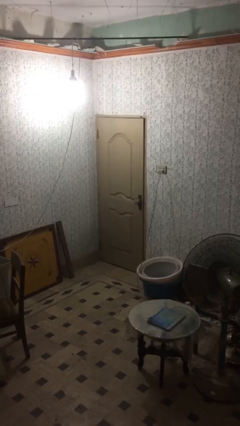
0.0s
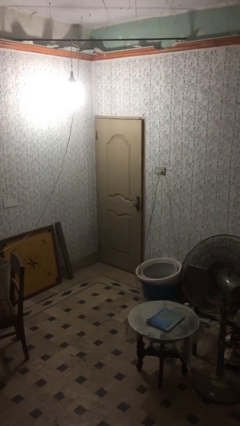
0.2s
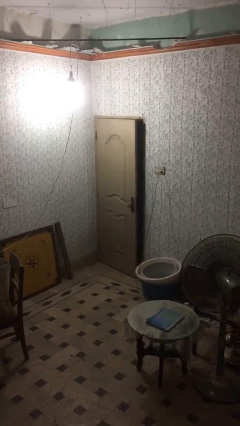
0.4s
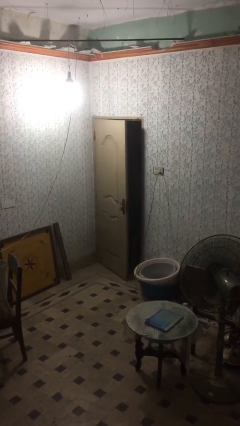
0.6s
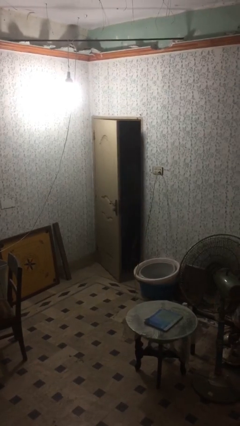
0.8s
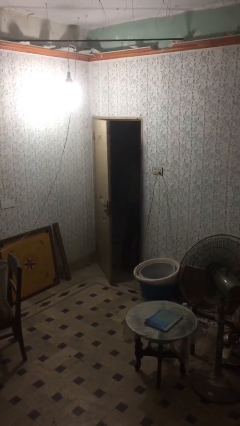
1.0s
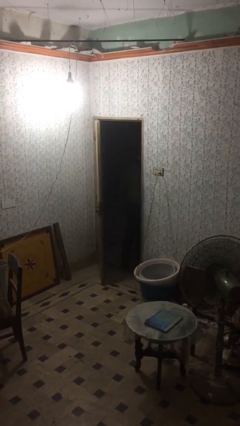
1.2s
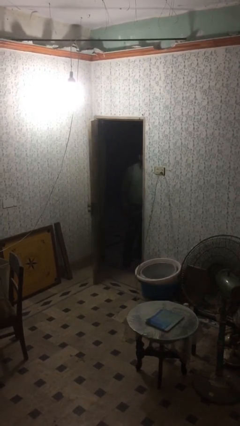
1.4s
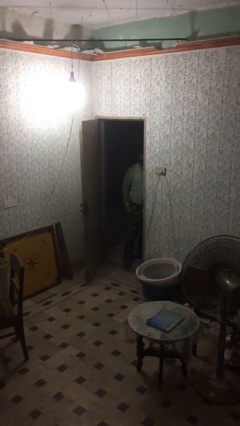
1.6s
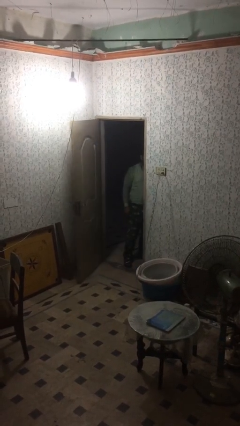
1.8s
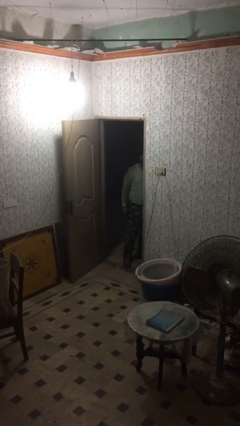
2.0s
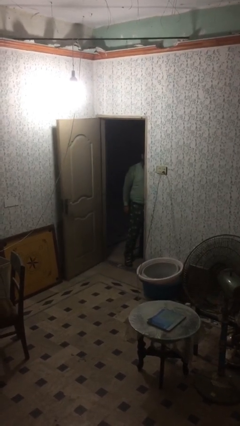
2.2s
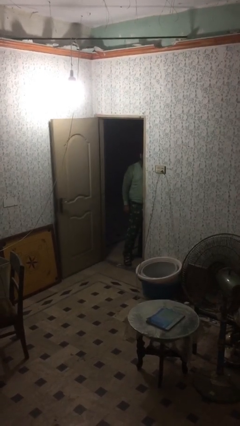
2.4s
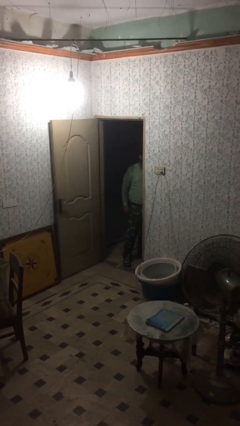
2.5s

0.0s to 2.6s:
person opens facility door

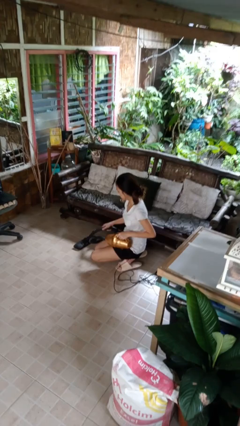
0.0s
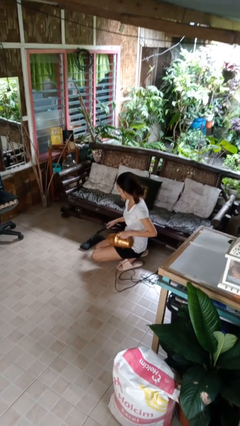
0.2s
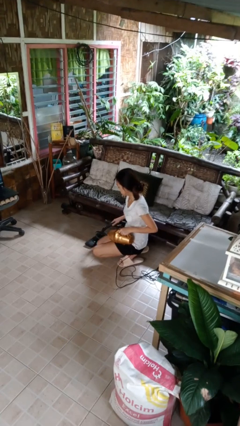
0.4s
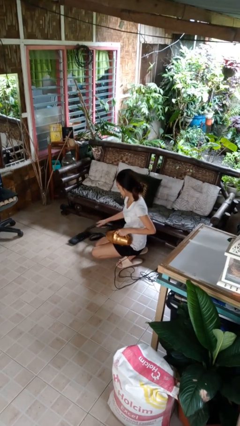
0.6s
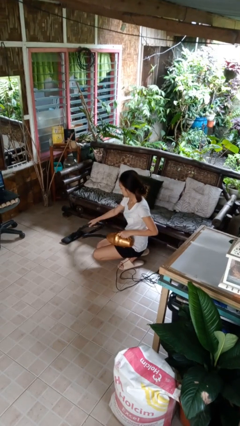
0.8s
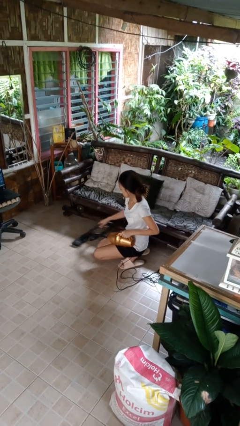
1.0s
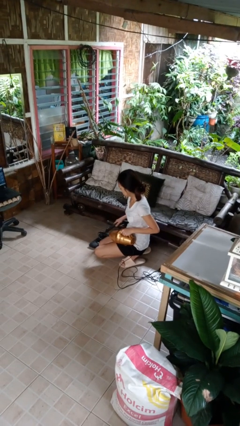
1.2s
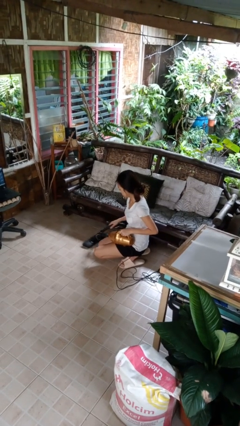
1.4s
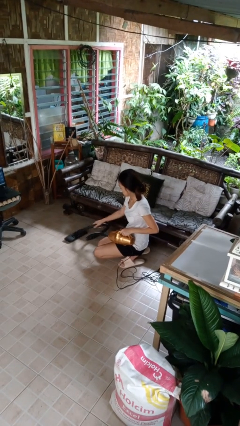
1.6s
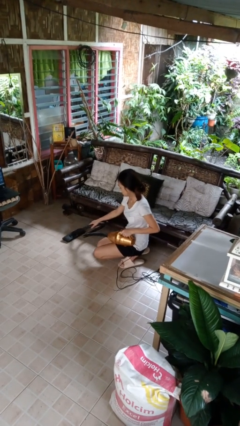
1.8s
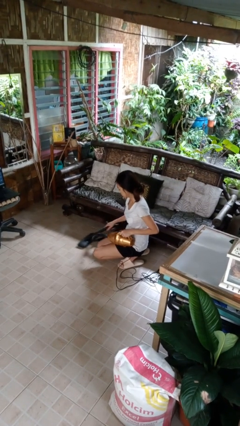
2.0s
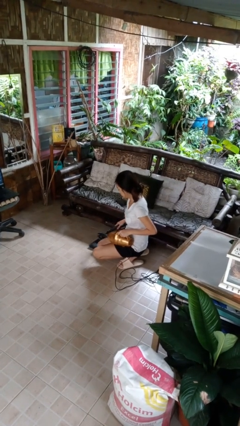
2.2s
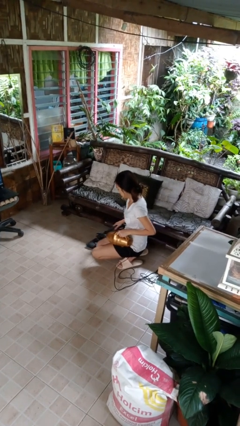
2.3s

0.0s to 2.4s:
person vacuums carpet

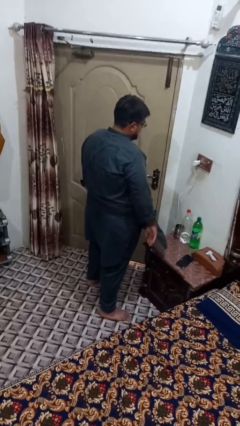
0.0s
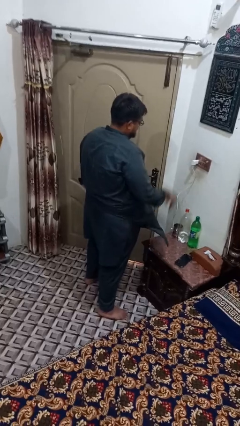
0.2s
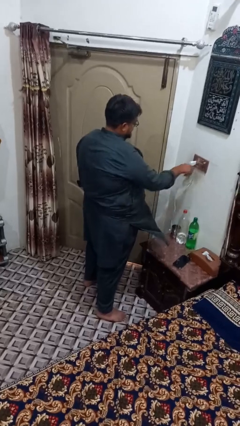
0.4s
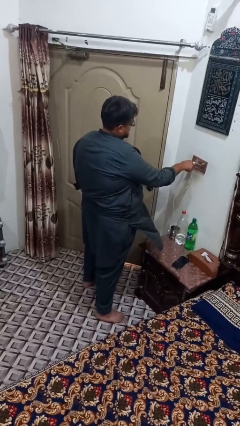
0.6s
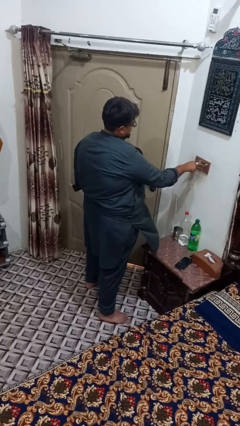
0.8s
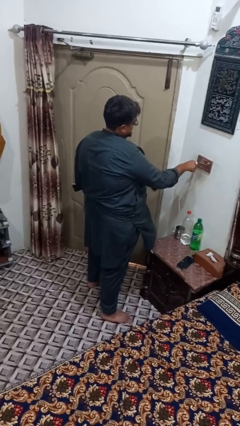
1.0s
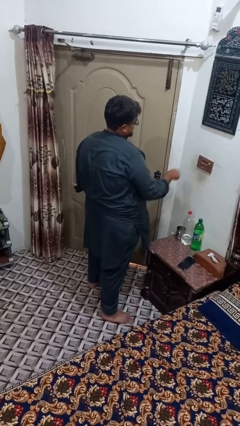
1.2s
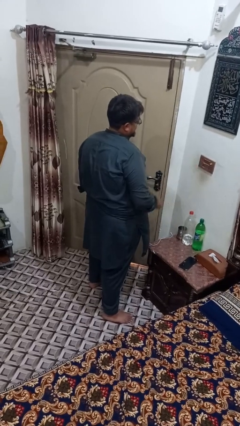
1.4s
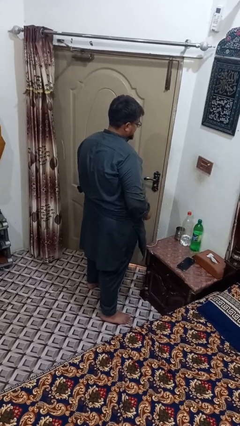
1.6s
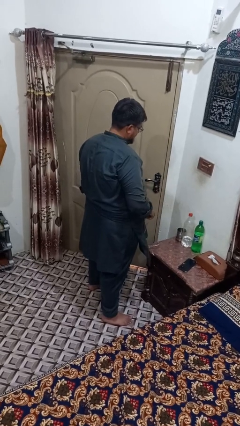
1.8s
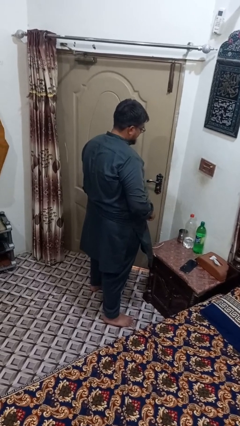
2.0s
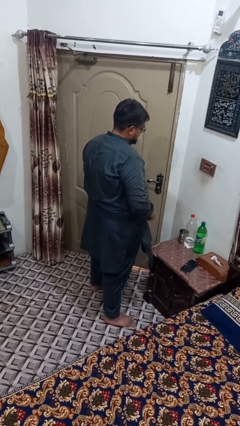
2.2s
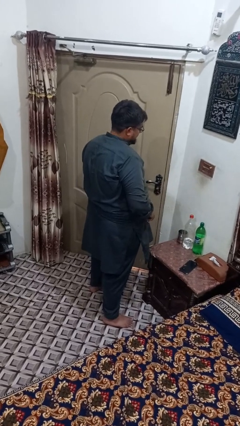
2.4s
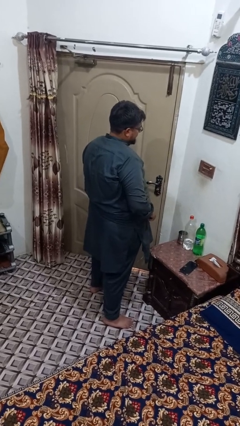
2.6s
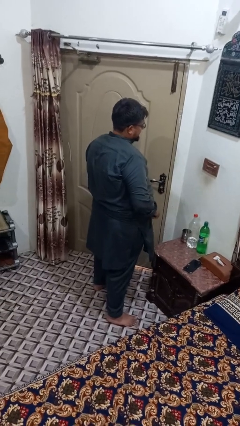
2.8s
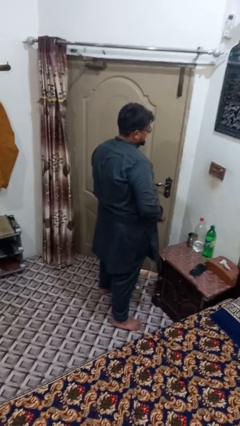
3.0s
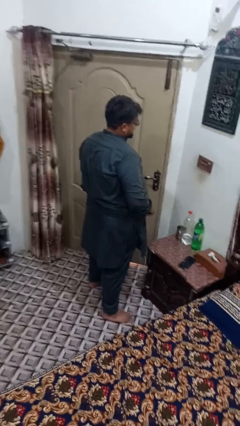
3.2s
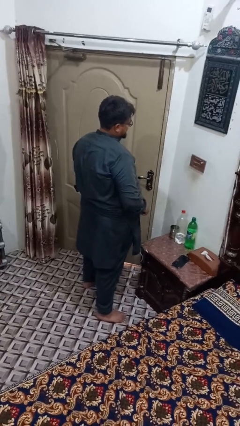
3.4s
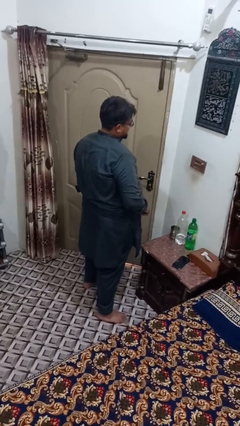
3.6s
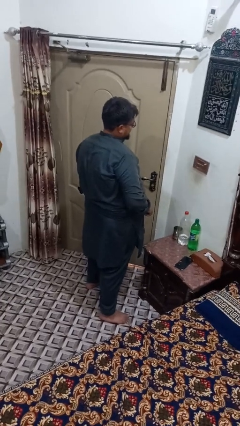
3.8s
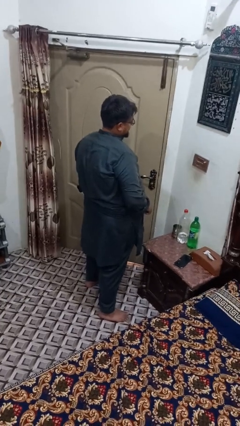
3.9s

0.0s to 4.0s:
person unplugs from electrical socket

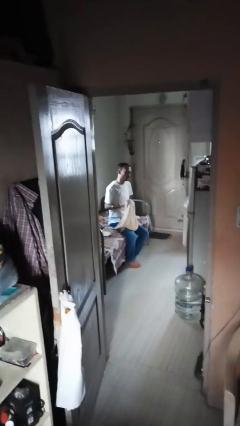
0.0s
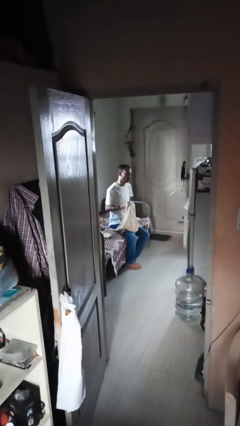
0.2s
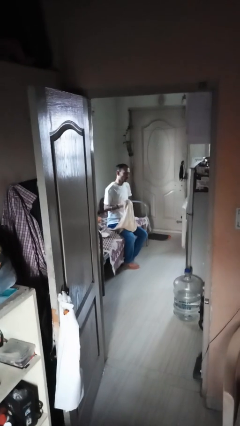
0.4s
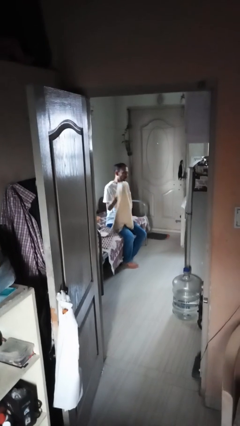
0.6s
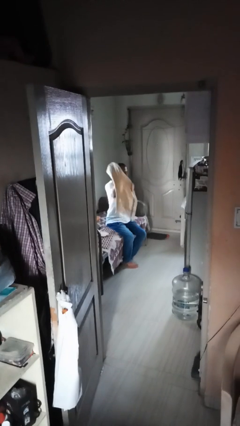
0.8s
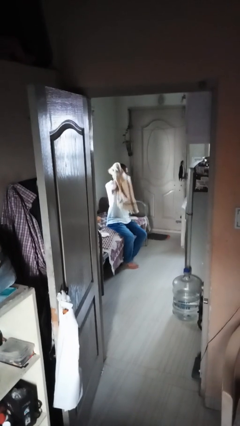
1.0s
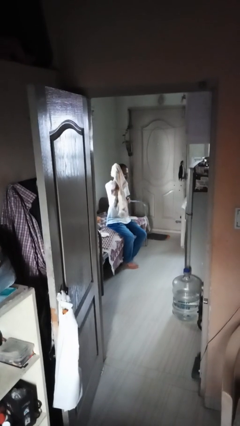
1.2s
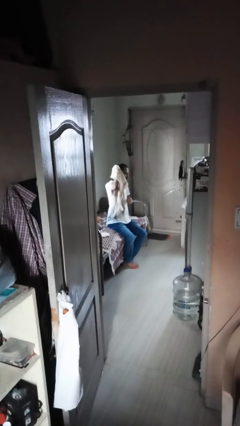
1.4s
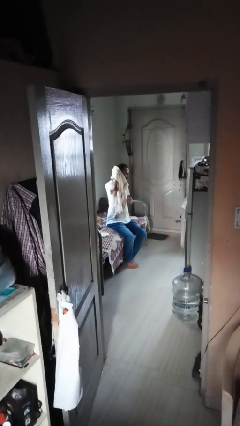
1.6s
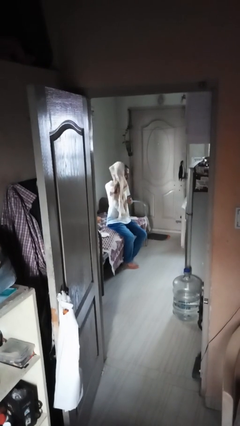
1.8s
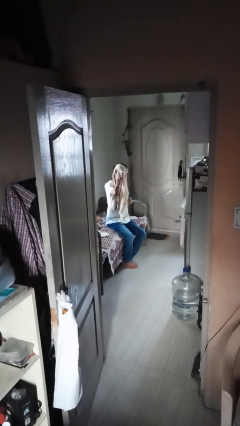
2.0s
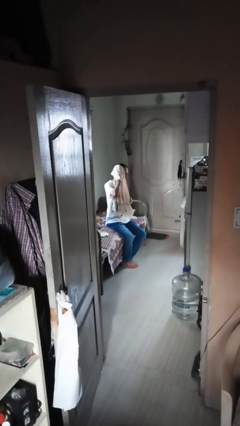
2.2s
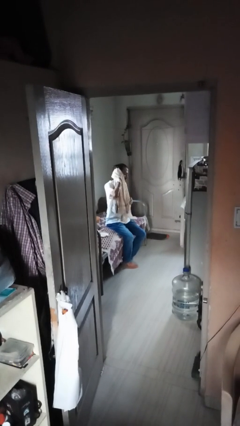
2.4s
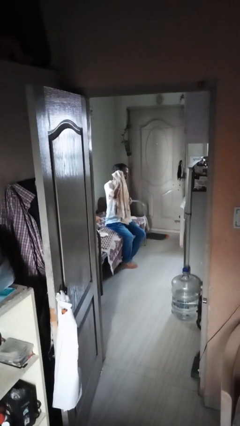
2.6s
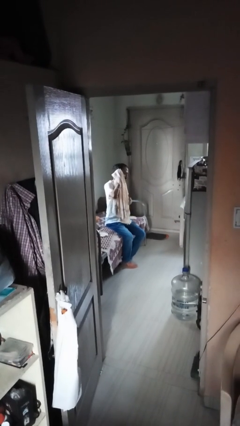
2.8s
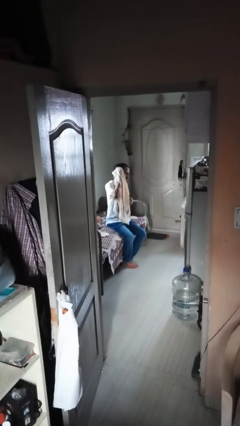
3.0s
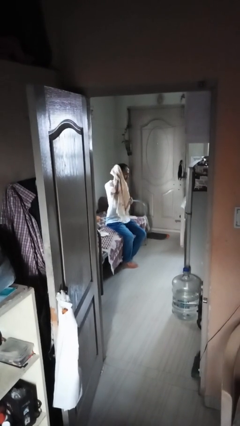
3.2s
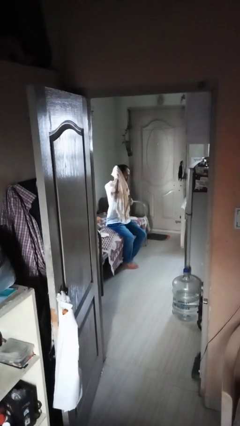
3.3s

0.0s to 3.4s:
person dries hair with towel

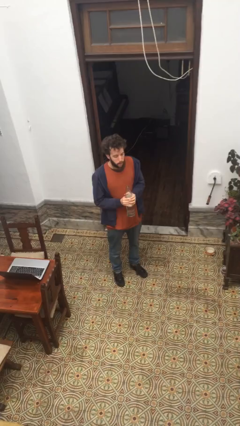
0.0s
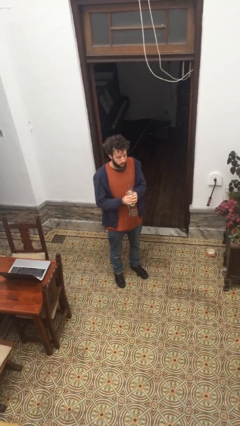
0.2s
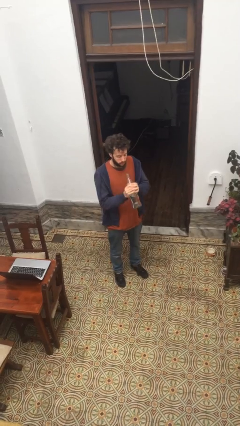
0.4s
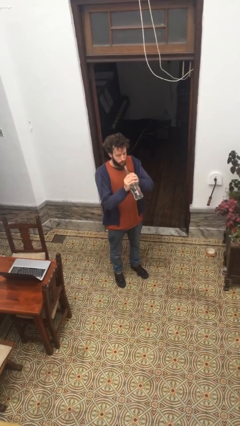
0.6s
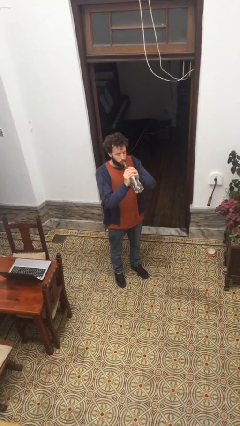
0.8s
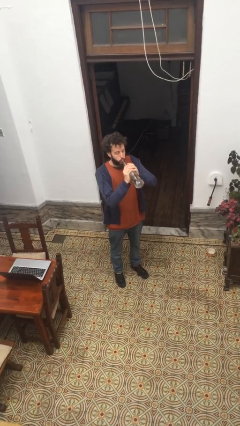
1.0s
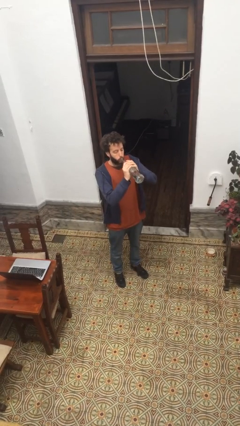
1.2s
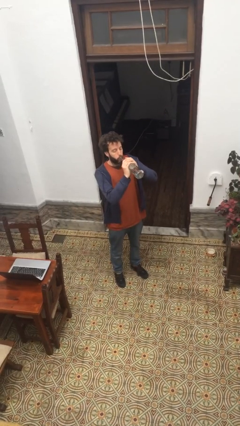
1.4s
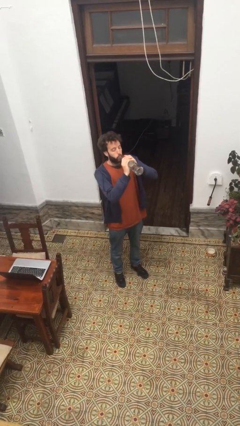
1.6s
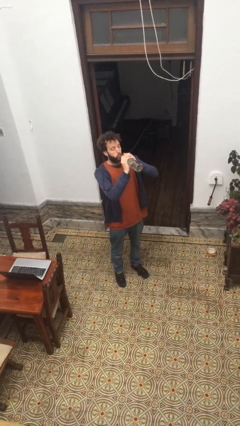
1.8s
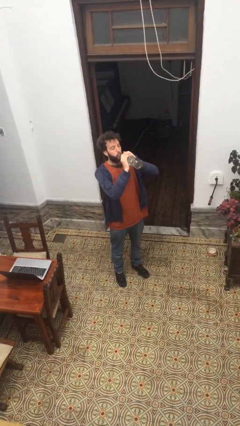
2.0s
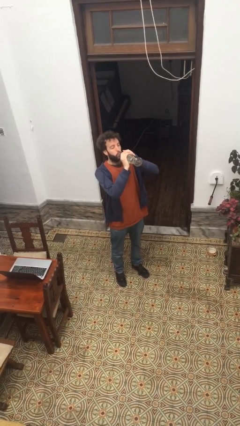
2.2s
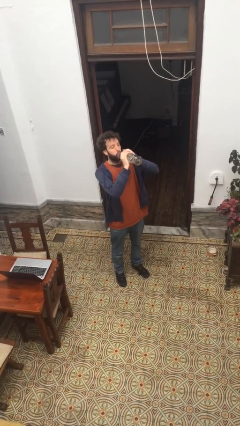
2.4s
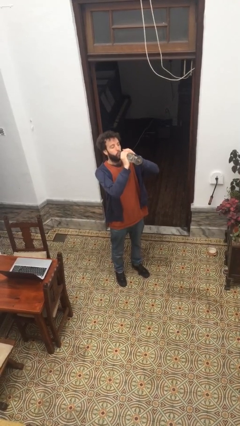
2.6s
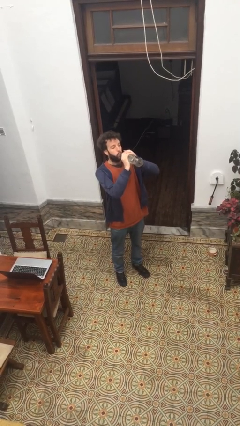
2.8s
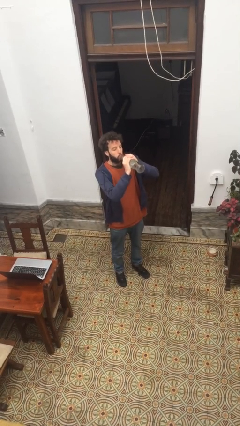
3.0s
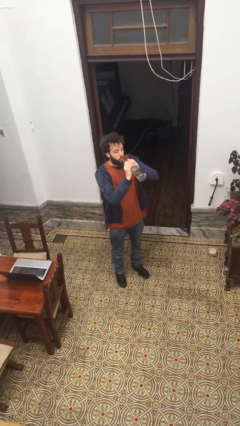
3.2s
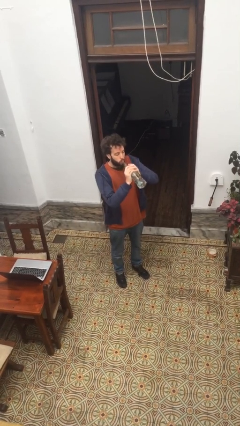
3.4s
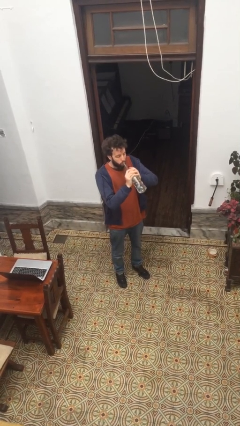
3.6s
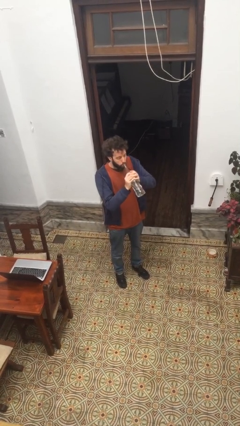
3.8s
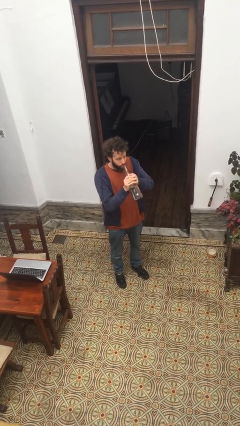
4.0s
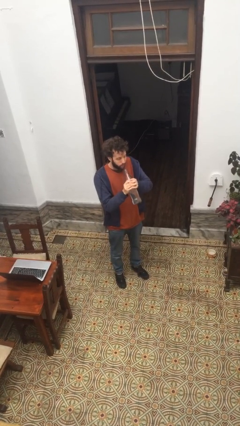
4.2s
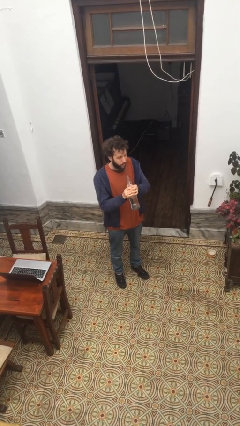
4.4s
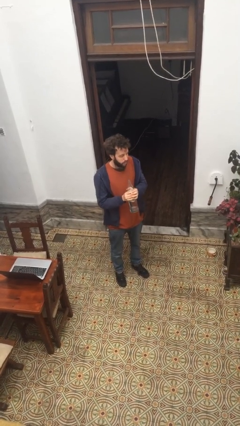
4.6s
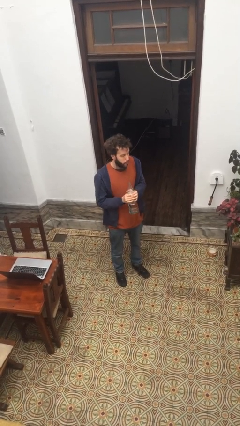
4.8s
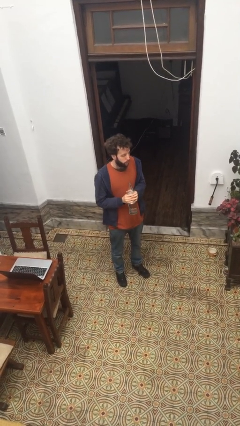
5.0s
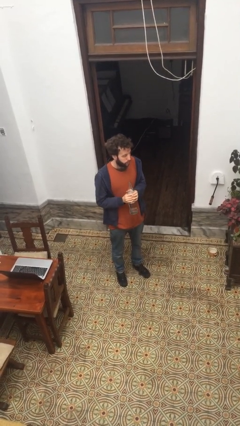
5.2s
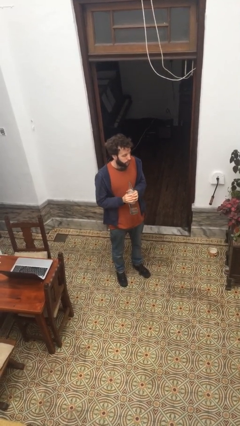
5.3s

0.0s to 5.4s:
person drinks from bottle

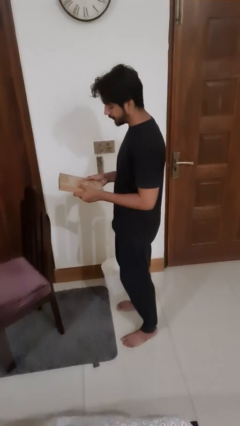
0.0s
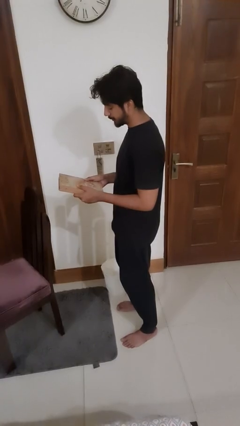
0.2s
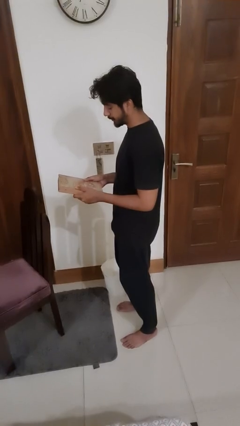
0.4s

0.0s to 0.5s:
person reads book
